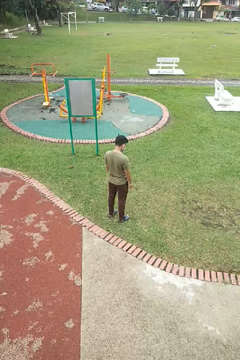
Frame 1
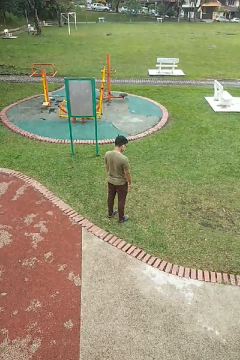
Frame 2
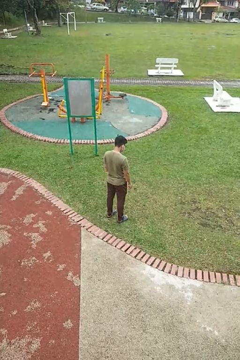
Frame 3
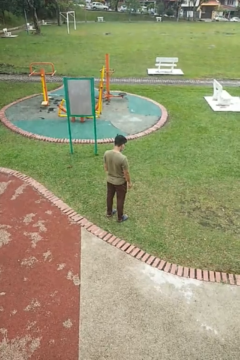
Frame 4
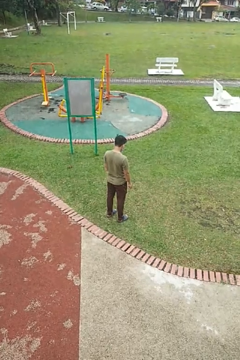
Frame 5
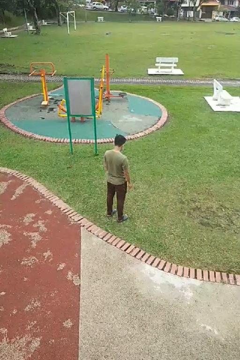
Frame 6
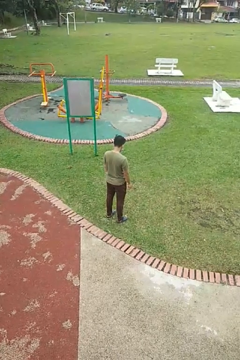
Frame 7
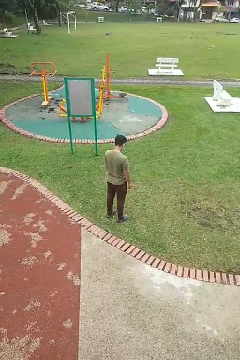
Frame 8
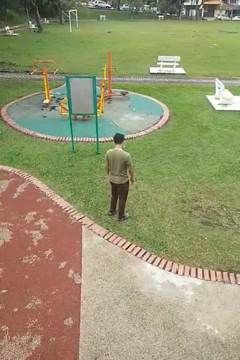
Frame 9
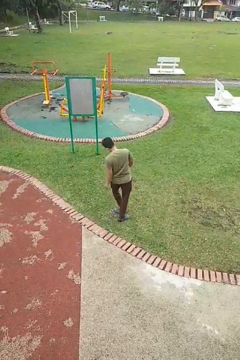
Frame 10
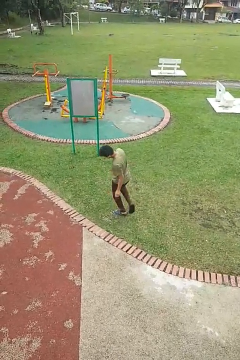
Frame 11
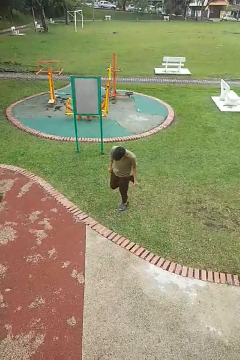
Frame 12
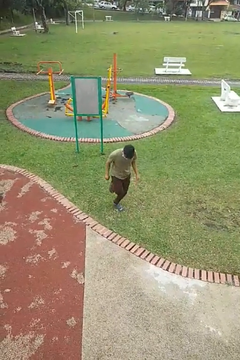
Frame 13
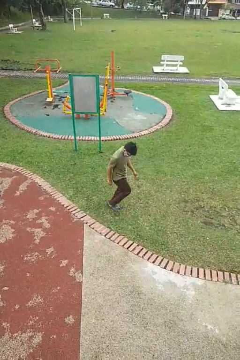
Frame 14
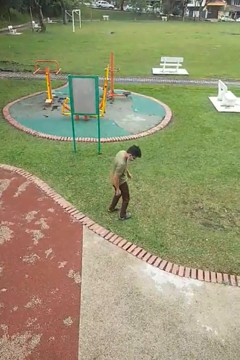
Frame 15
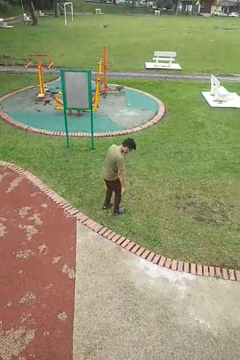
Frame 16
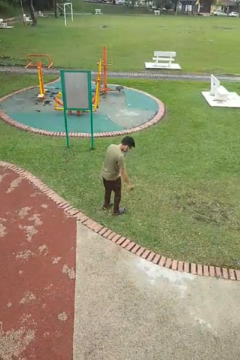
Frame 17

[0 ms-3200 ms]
person twirls

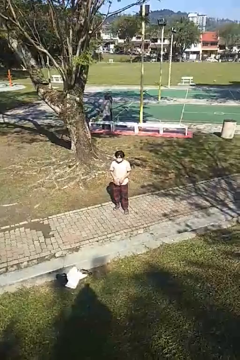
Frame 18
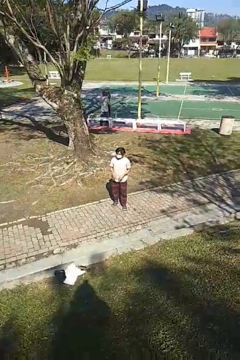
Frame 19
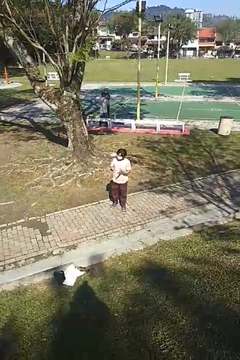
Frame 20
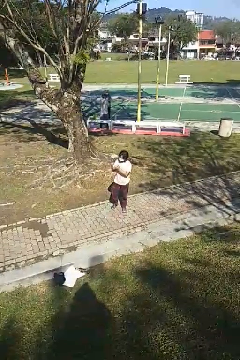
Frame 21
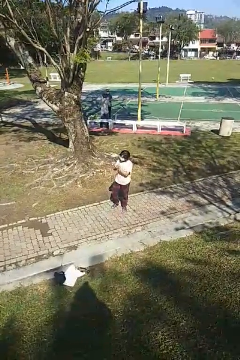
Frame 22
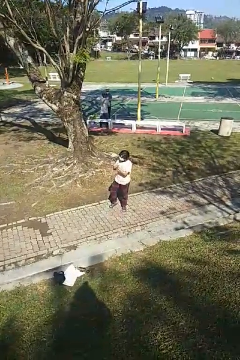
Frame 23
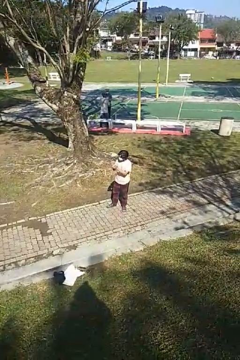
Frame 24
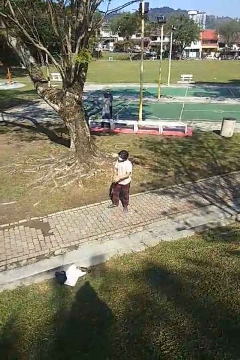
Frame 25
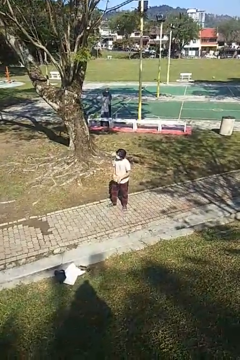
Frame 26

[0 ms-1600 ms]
person claps hands

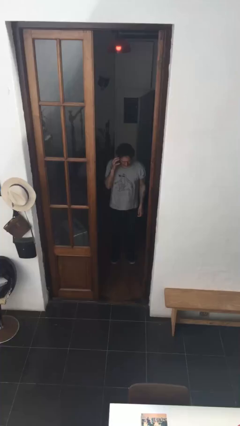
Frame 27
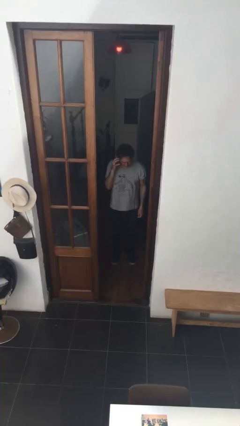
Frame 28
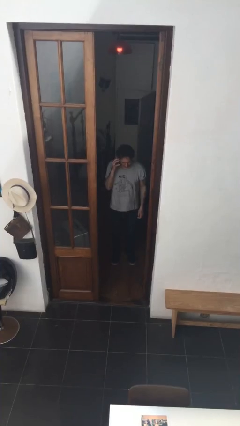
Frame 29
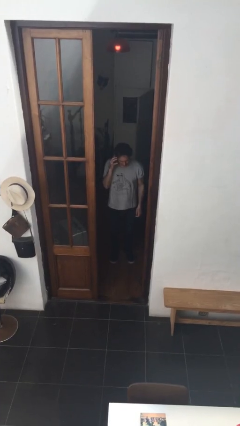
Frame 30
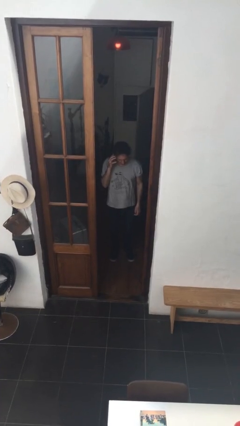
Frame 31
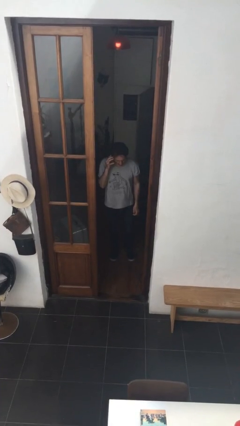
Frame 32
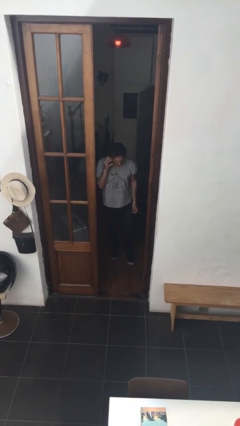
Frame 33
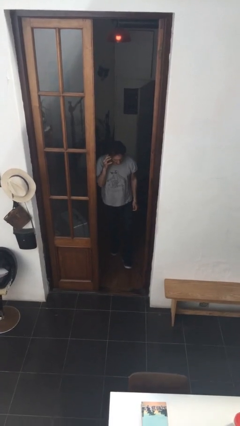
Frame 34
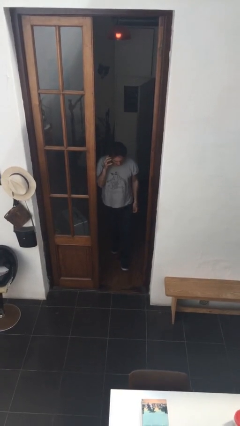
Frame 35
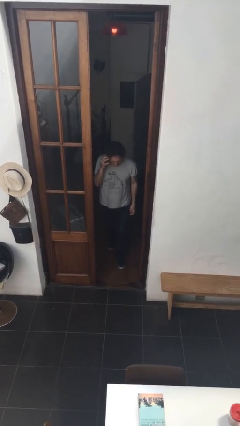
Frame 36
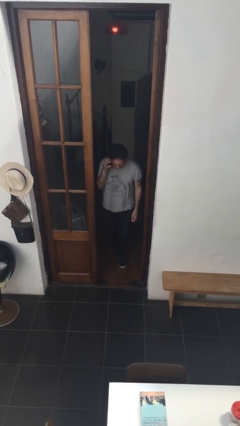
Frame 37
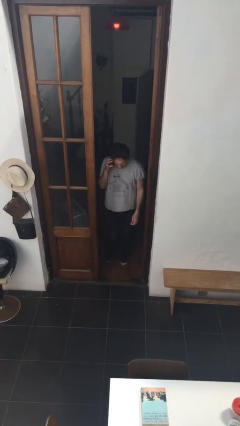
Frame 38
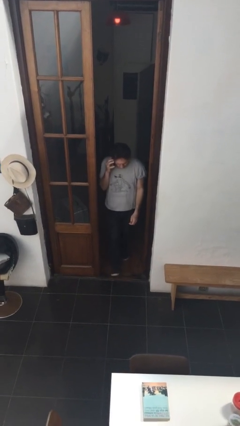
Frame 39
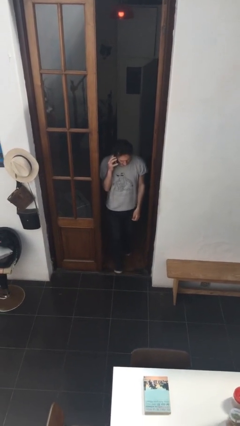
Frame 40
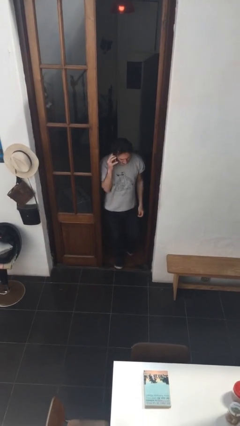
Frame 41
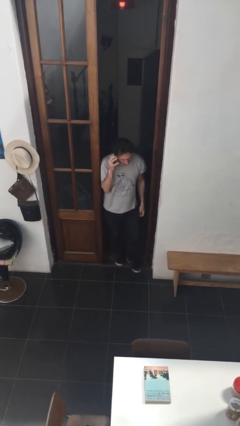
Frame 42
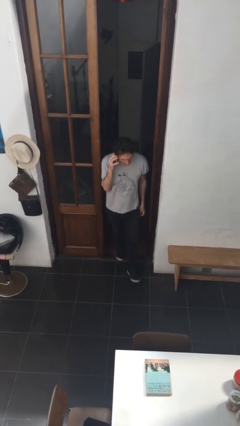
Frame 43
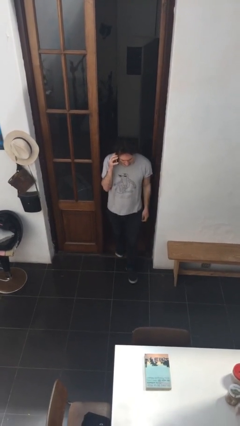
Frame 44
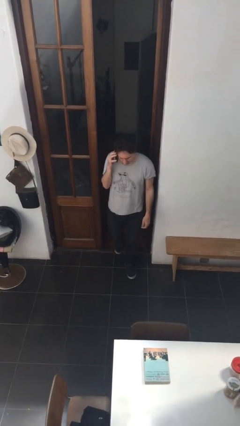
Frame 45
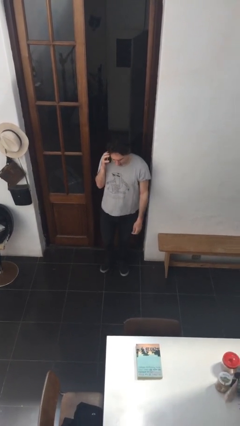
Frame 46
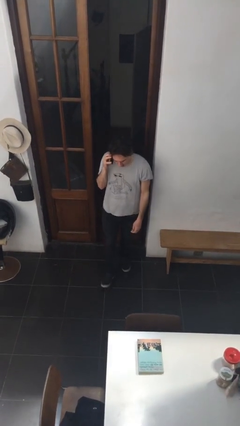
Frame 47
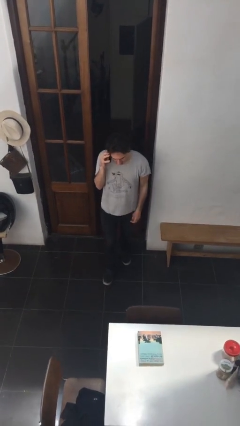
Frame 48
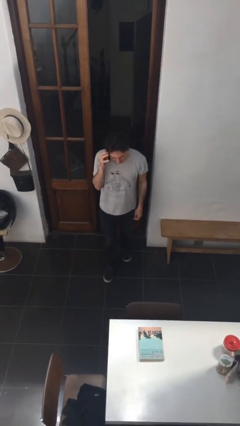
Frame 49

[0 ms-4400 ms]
person enters scene through structure

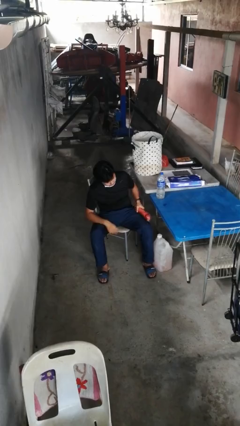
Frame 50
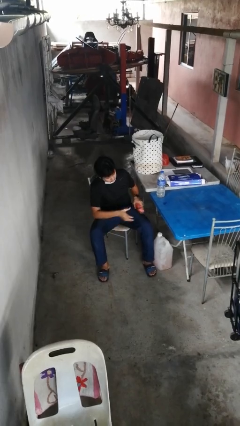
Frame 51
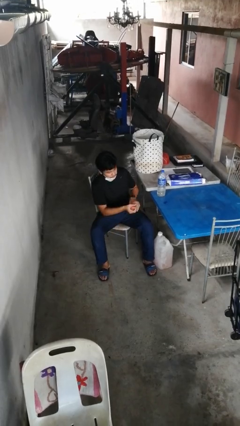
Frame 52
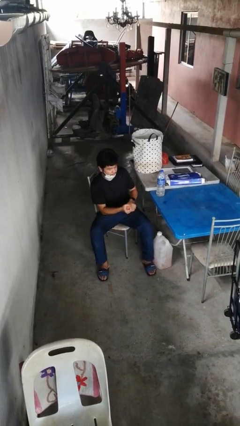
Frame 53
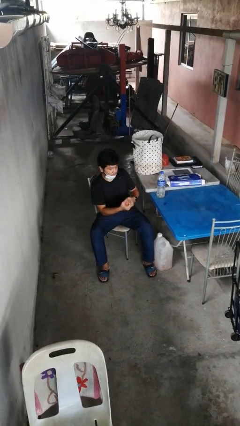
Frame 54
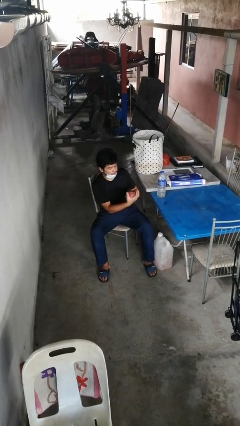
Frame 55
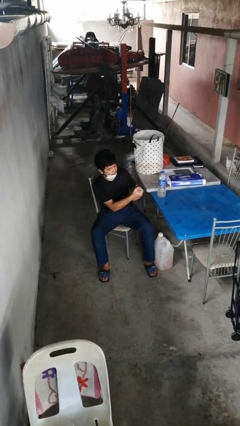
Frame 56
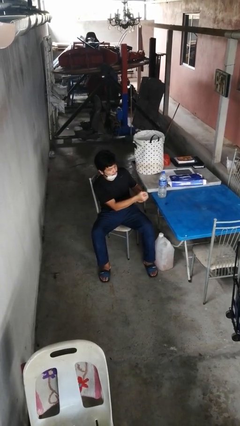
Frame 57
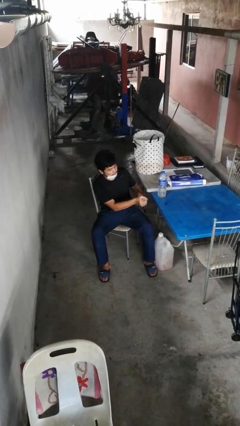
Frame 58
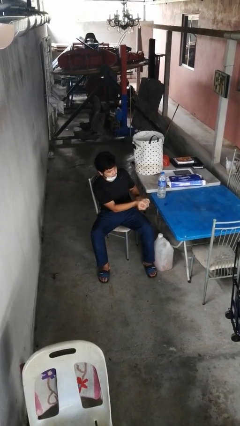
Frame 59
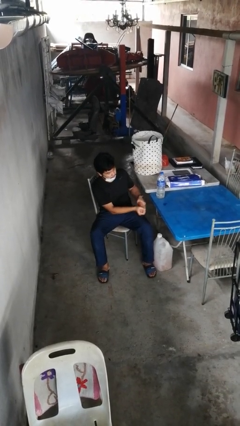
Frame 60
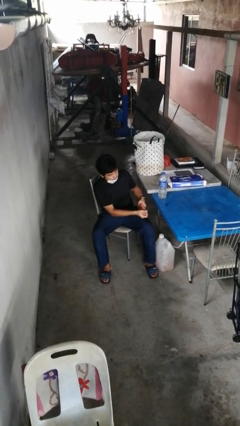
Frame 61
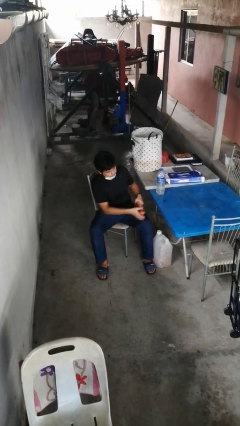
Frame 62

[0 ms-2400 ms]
person squeezes object

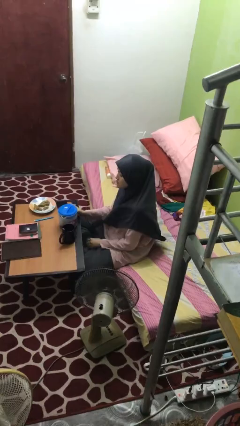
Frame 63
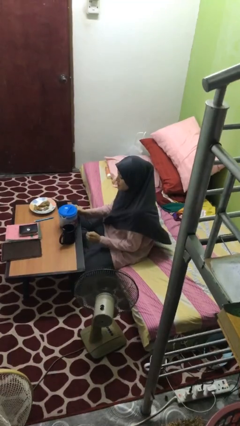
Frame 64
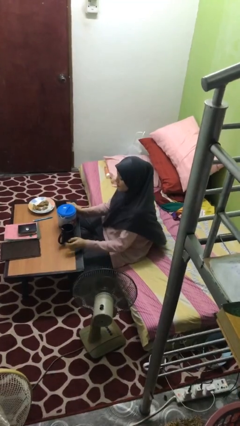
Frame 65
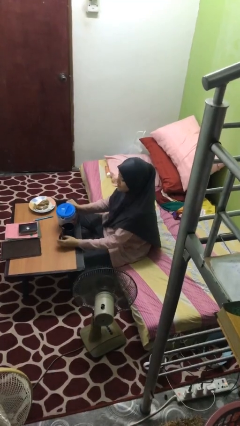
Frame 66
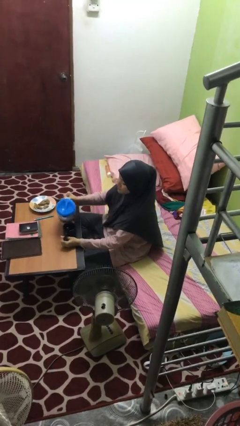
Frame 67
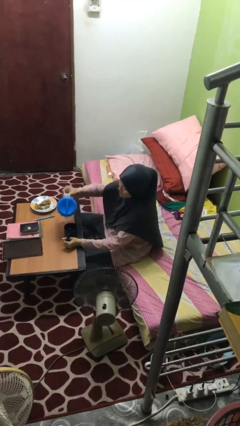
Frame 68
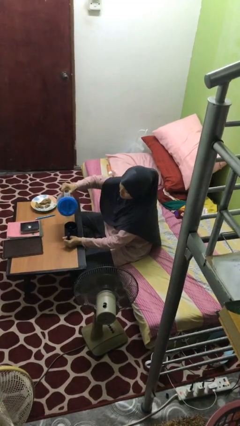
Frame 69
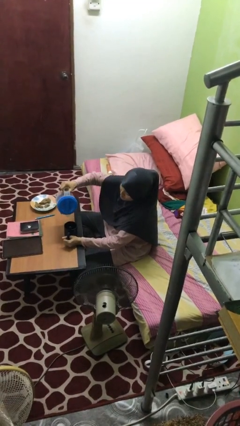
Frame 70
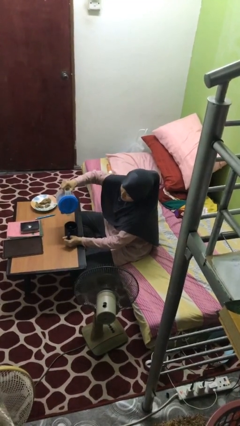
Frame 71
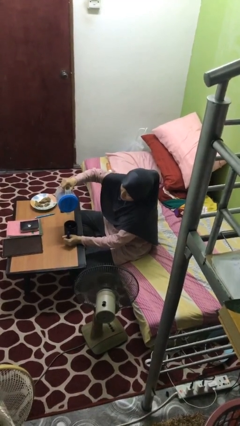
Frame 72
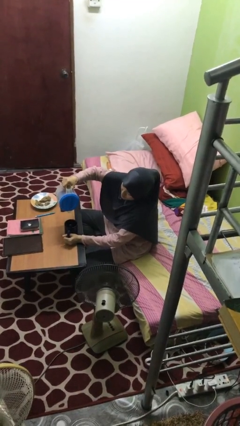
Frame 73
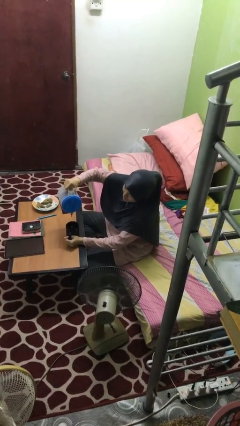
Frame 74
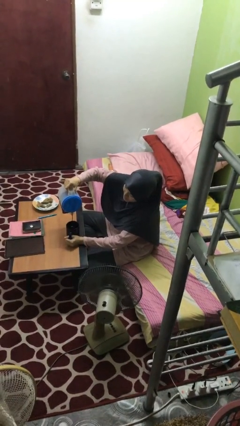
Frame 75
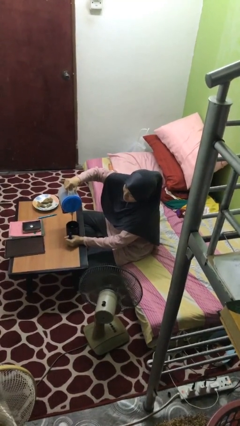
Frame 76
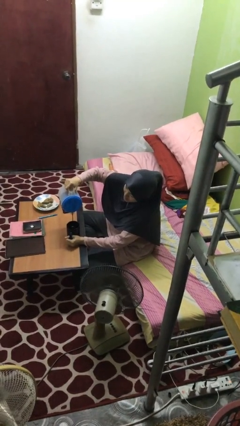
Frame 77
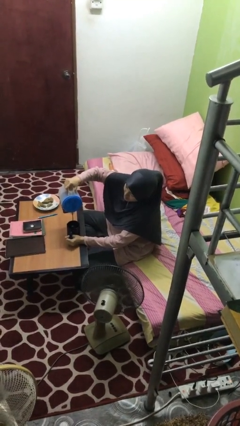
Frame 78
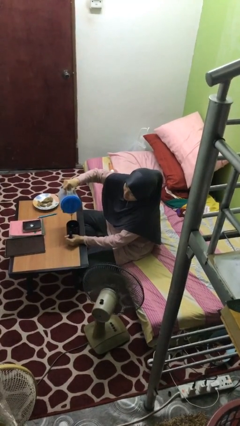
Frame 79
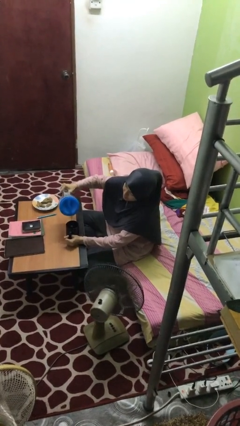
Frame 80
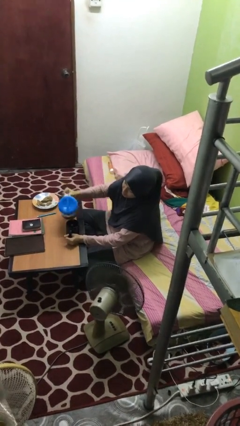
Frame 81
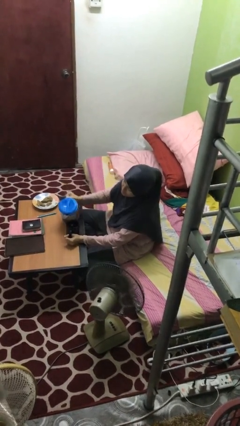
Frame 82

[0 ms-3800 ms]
person pours coffee into mug

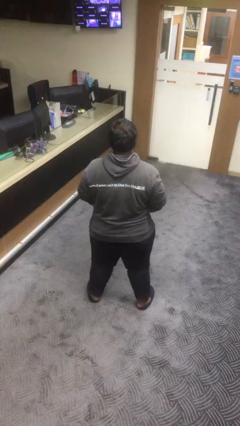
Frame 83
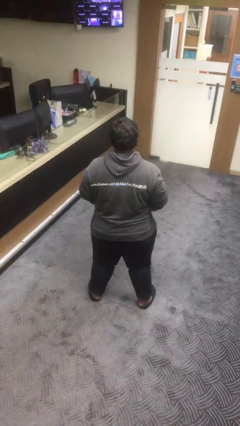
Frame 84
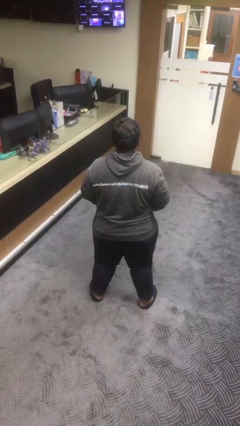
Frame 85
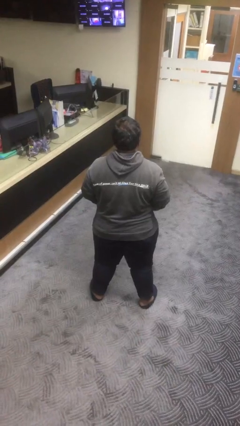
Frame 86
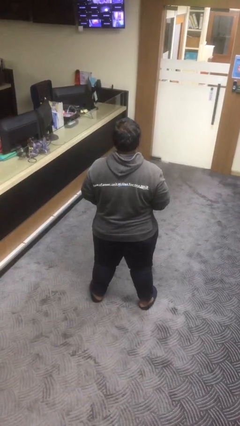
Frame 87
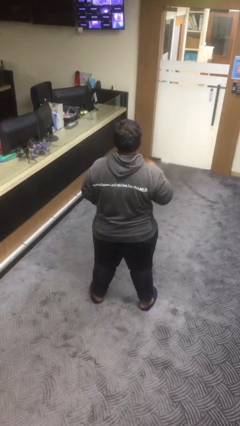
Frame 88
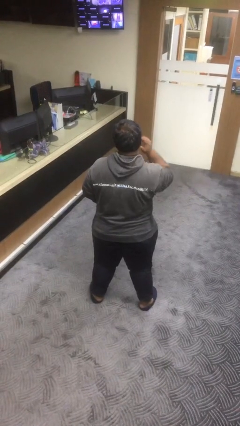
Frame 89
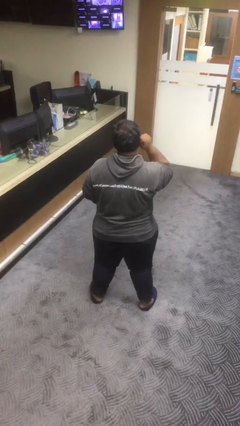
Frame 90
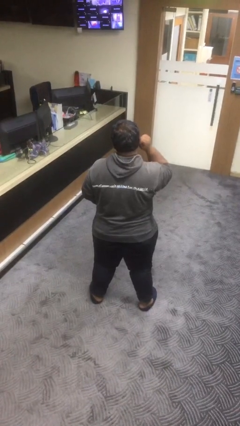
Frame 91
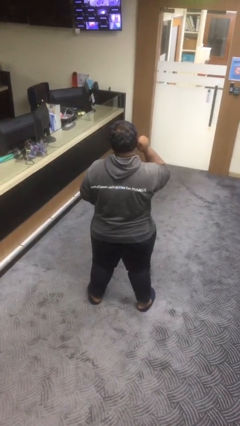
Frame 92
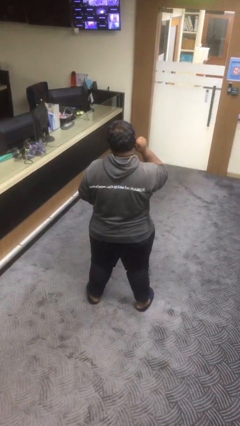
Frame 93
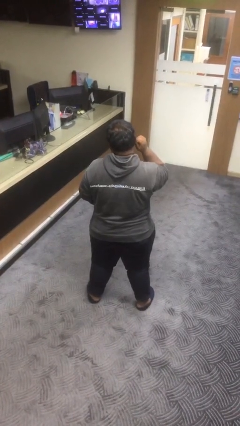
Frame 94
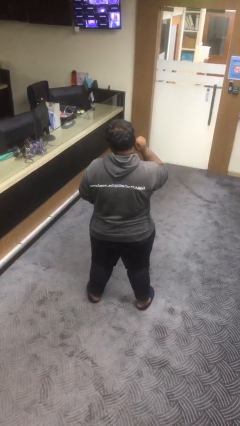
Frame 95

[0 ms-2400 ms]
person touches earlobe

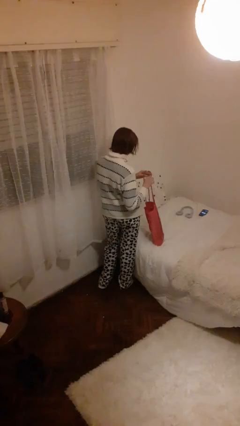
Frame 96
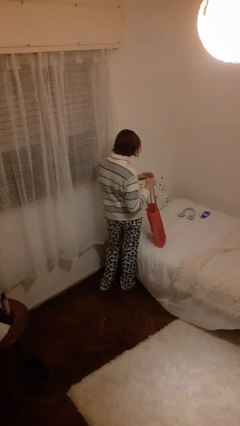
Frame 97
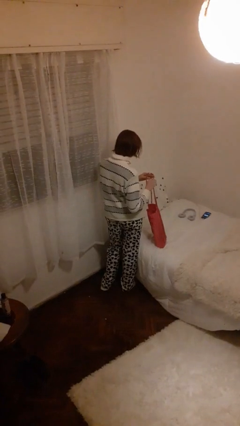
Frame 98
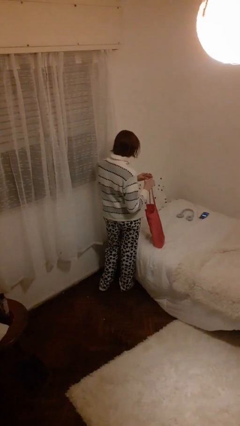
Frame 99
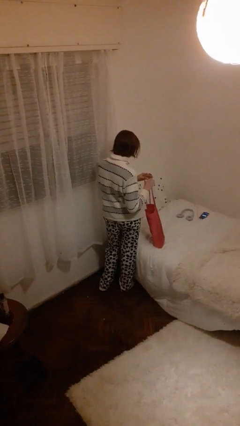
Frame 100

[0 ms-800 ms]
person takes object from bag
